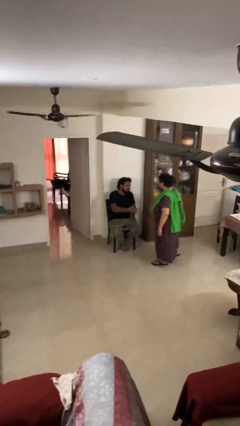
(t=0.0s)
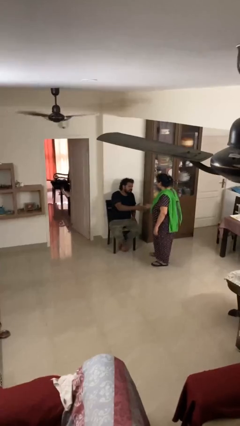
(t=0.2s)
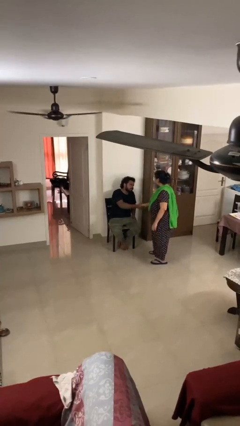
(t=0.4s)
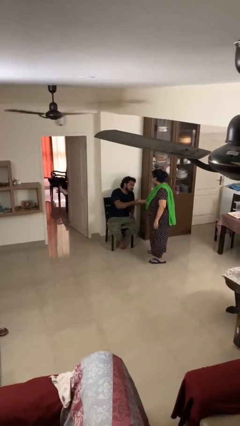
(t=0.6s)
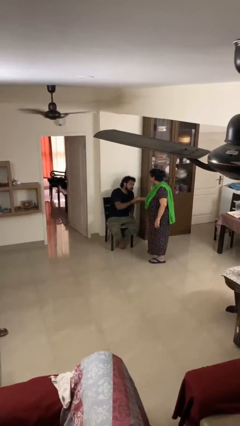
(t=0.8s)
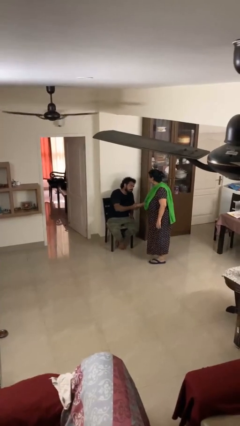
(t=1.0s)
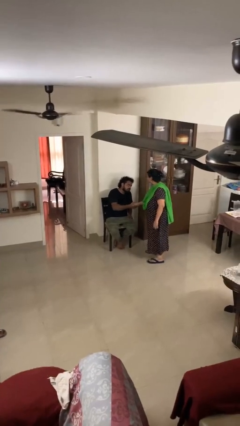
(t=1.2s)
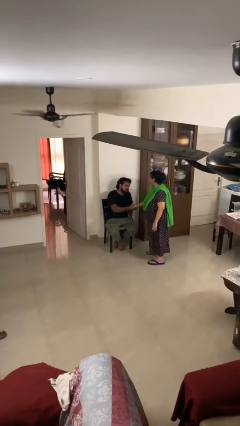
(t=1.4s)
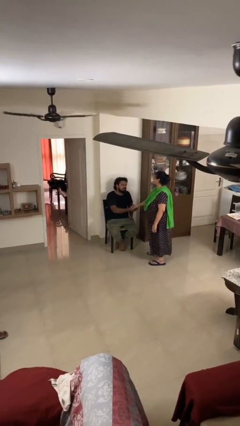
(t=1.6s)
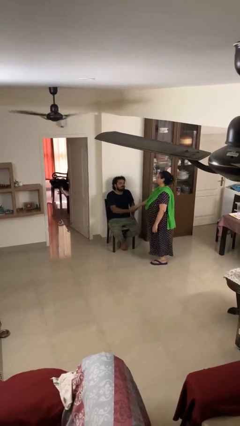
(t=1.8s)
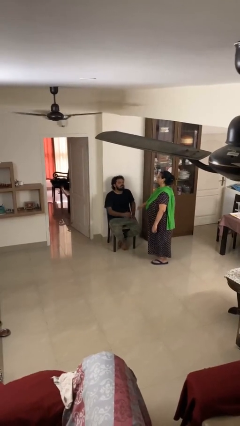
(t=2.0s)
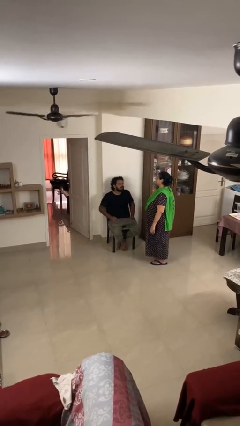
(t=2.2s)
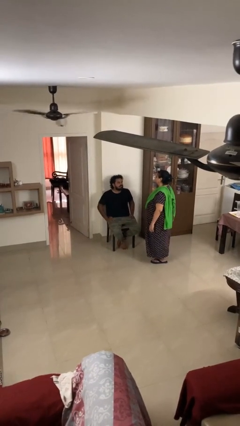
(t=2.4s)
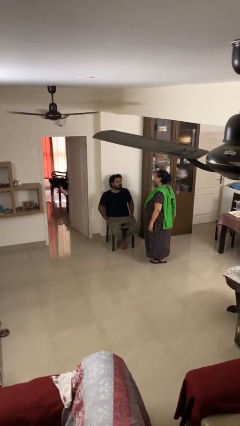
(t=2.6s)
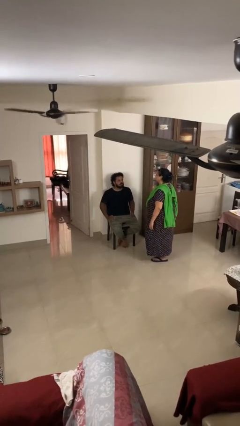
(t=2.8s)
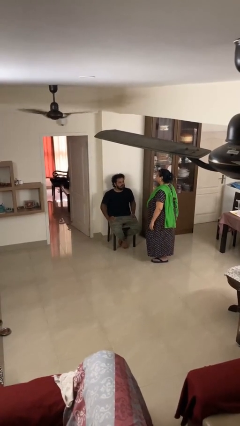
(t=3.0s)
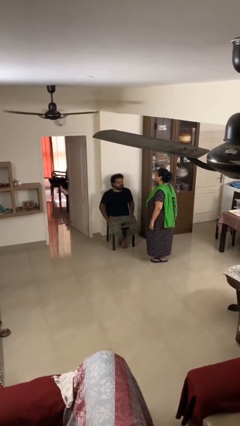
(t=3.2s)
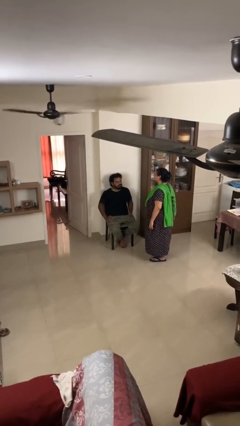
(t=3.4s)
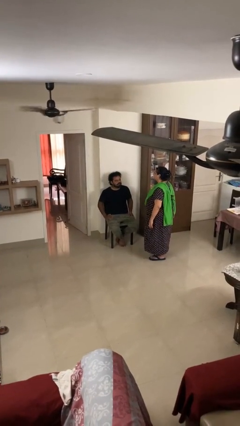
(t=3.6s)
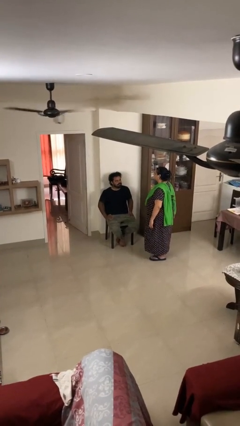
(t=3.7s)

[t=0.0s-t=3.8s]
person shakes hand

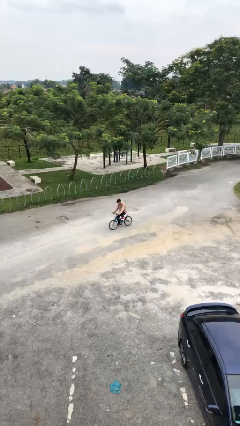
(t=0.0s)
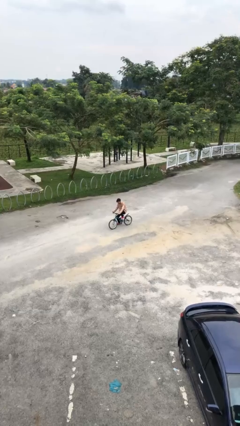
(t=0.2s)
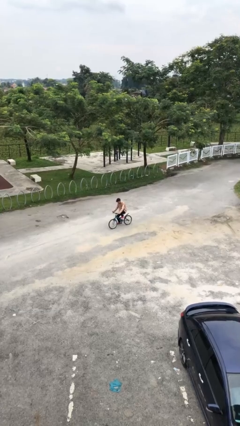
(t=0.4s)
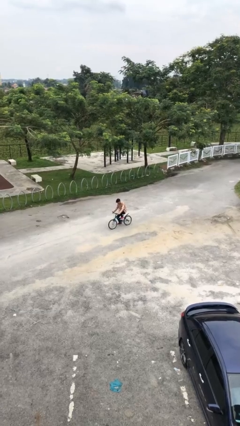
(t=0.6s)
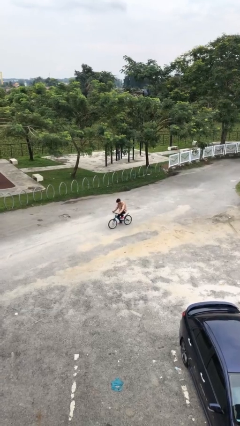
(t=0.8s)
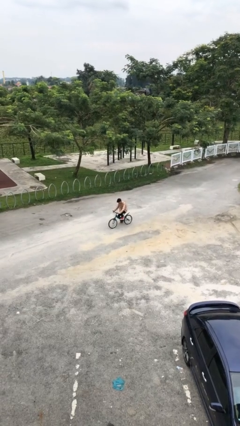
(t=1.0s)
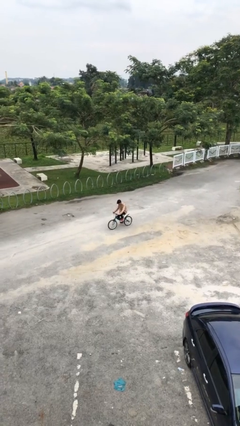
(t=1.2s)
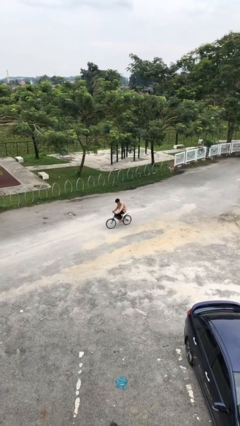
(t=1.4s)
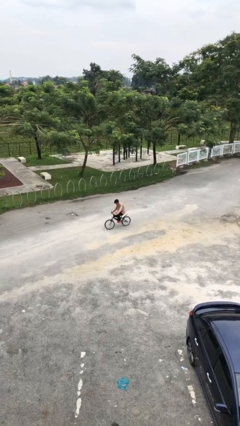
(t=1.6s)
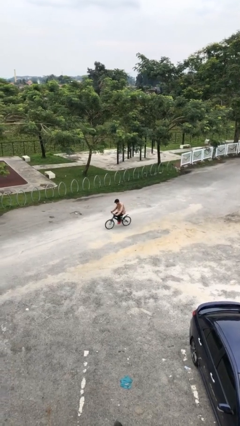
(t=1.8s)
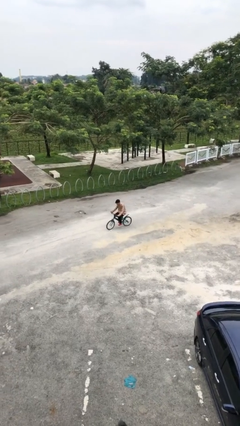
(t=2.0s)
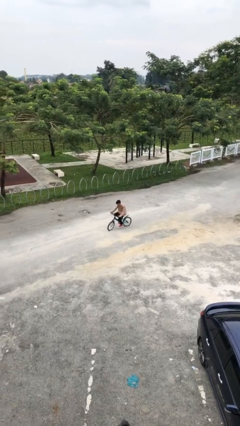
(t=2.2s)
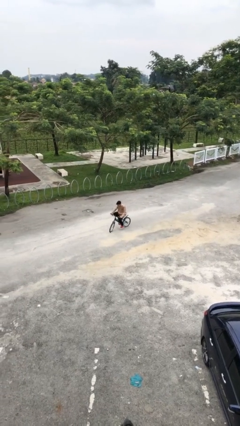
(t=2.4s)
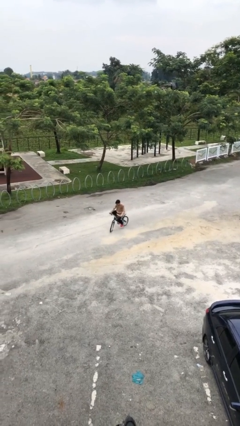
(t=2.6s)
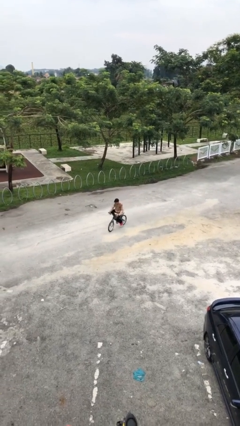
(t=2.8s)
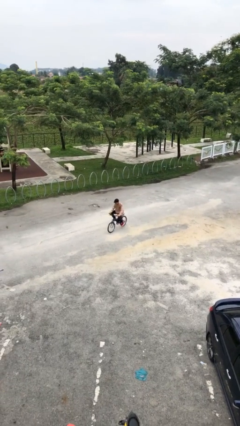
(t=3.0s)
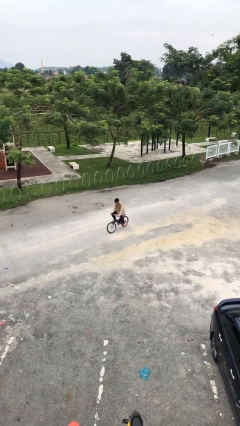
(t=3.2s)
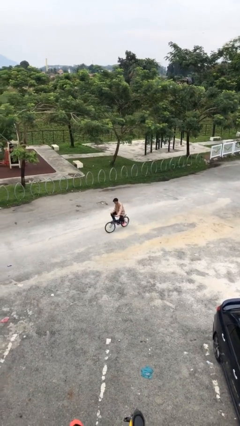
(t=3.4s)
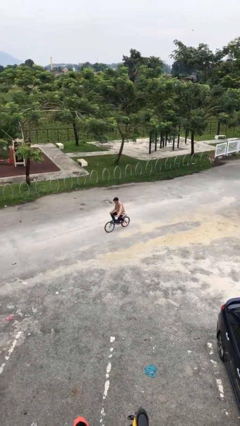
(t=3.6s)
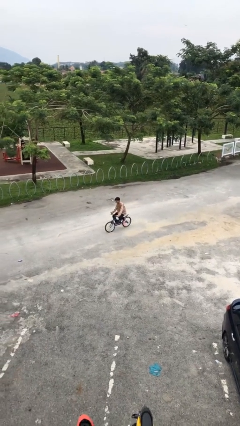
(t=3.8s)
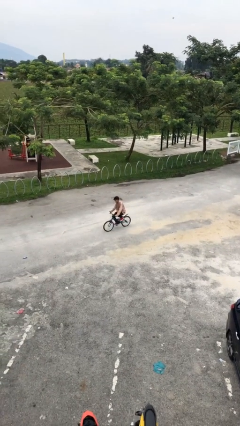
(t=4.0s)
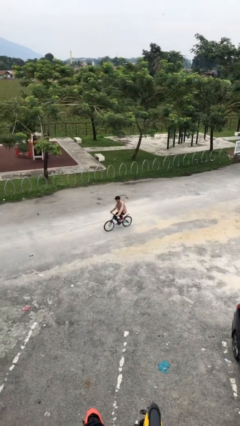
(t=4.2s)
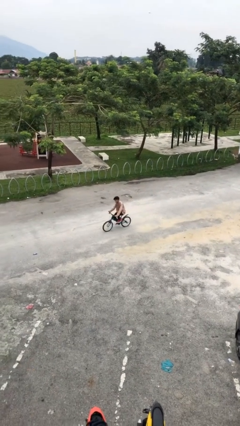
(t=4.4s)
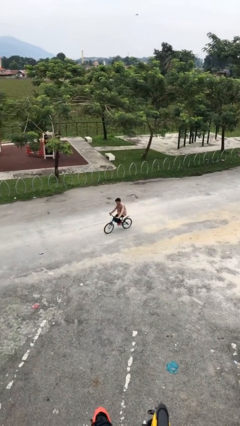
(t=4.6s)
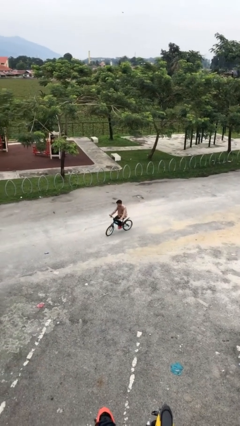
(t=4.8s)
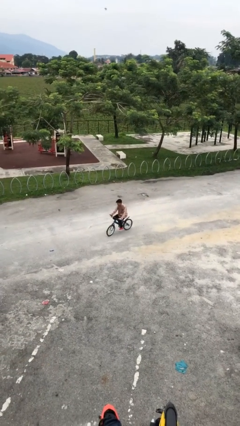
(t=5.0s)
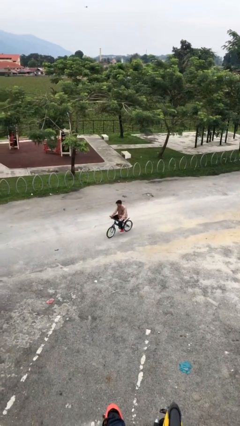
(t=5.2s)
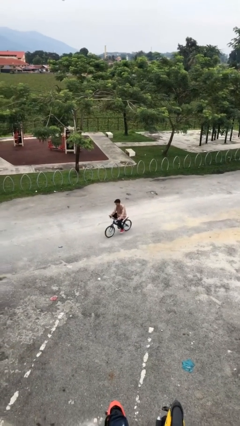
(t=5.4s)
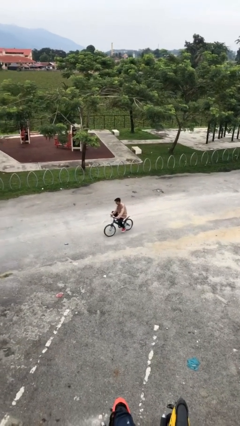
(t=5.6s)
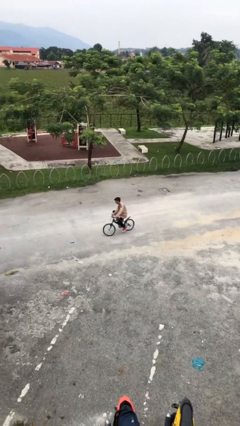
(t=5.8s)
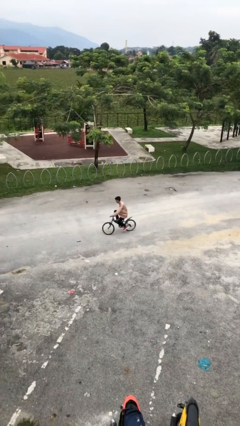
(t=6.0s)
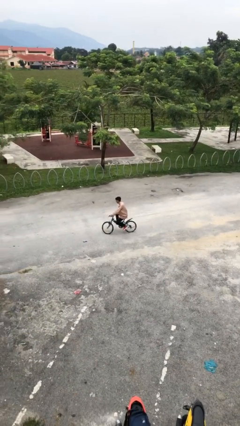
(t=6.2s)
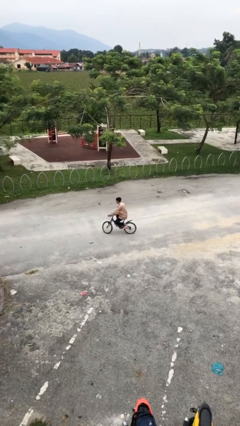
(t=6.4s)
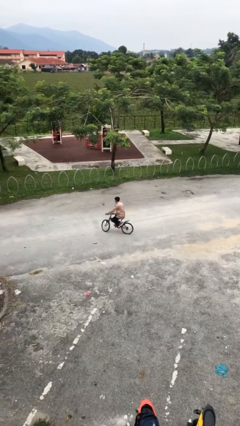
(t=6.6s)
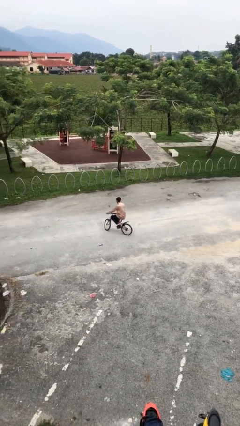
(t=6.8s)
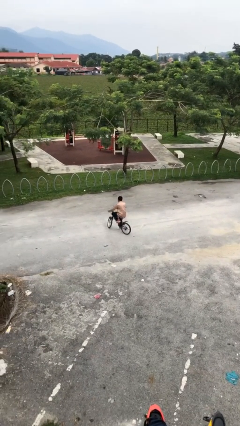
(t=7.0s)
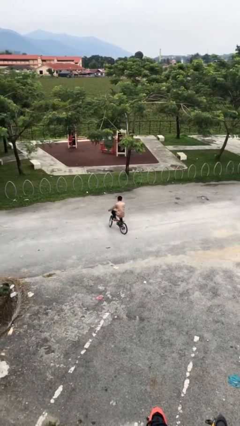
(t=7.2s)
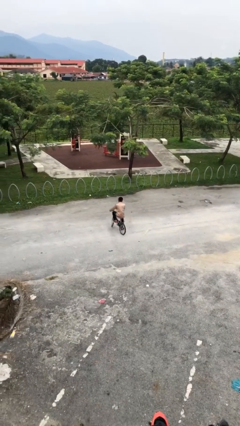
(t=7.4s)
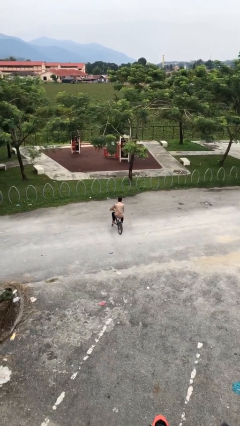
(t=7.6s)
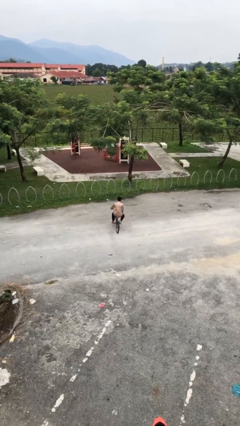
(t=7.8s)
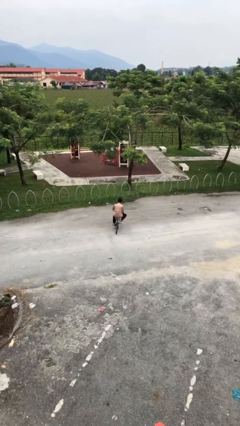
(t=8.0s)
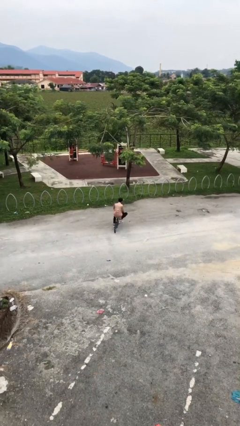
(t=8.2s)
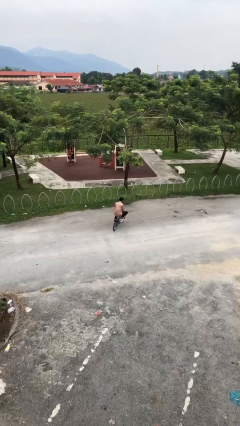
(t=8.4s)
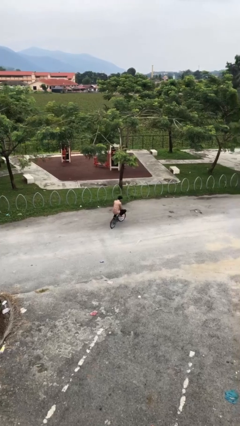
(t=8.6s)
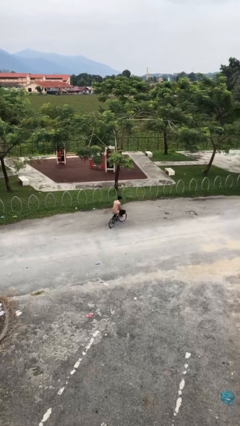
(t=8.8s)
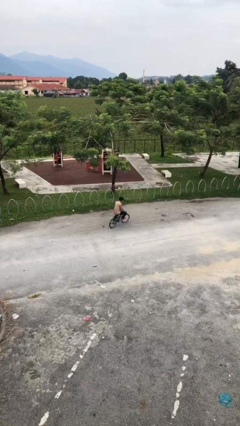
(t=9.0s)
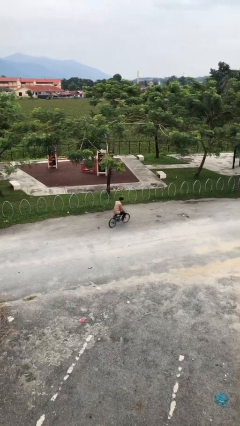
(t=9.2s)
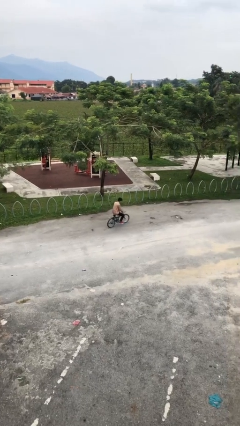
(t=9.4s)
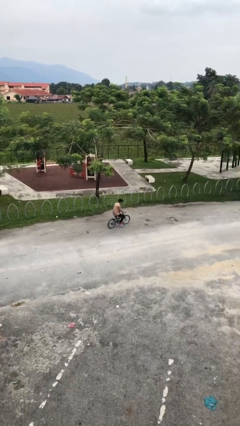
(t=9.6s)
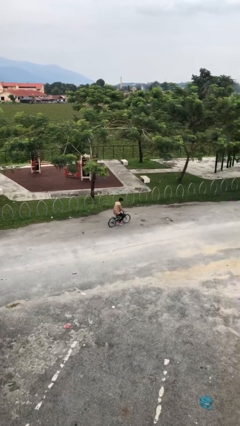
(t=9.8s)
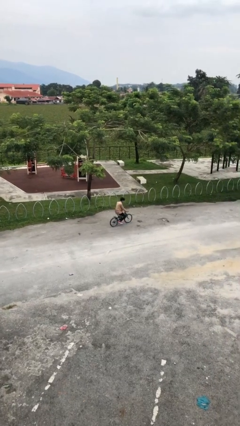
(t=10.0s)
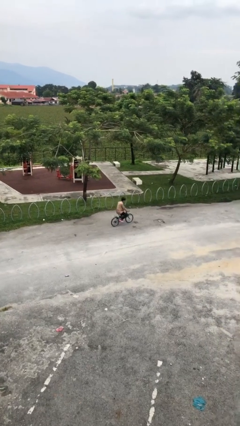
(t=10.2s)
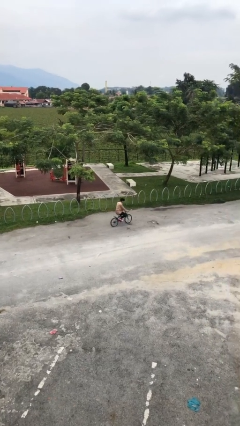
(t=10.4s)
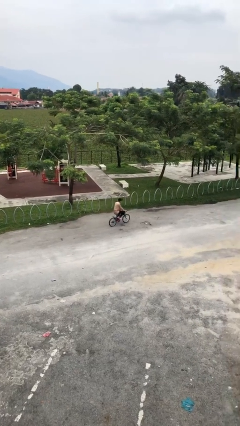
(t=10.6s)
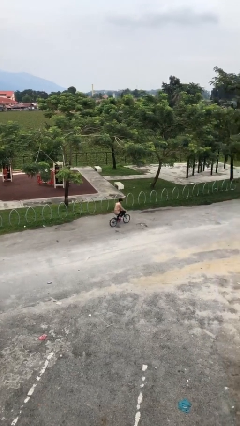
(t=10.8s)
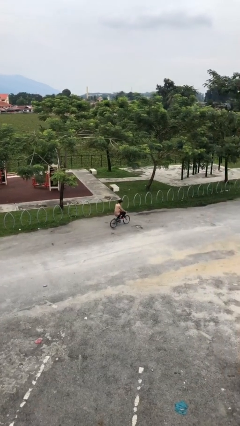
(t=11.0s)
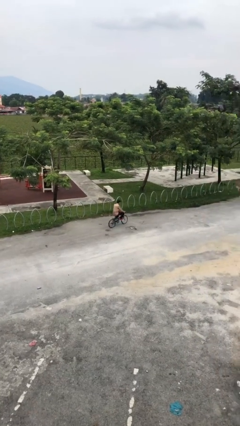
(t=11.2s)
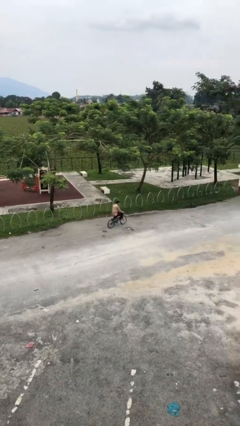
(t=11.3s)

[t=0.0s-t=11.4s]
person rides bicycle

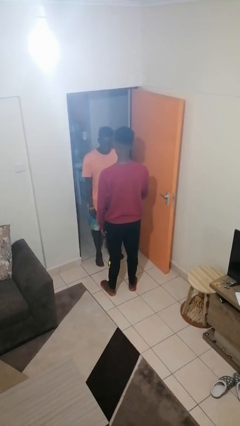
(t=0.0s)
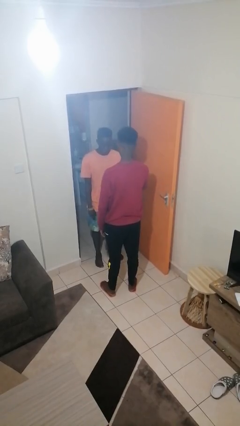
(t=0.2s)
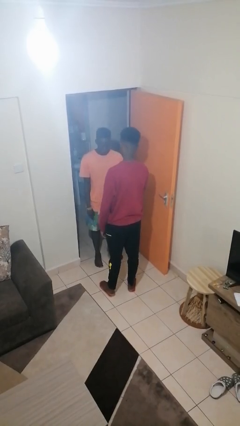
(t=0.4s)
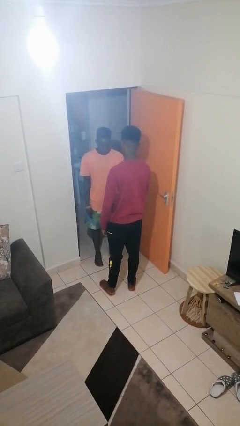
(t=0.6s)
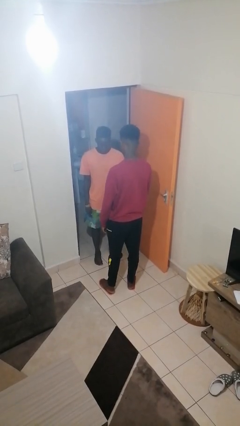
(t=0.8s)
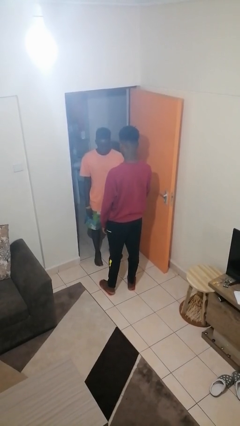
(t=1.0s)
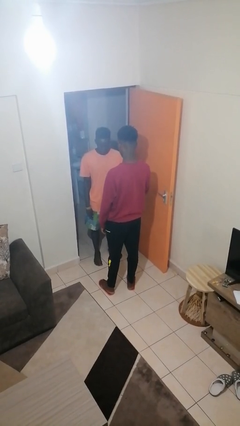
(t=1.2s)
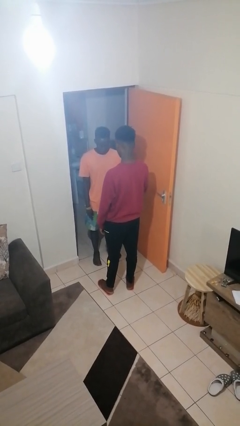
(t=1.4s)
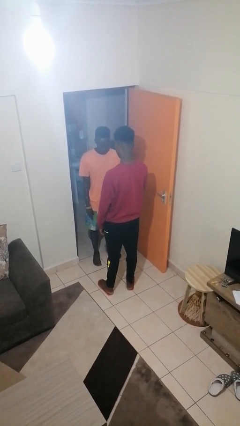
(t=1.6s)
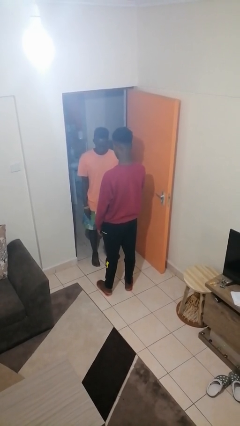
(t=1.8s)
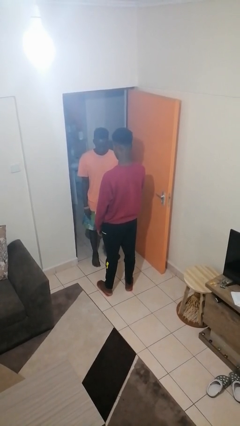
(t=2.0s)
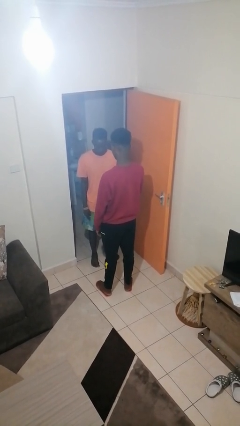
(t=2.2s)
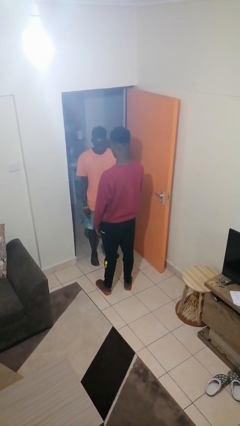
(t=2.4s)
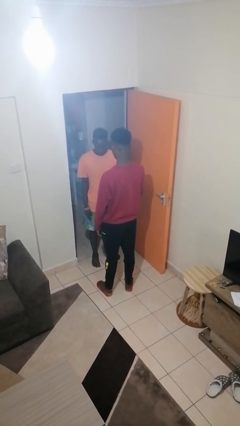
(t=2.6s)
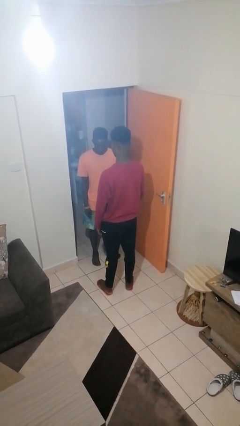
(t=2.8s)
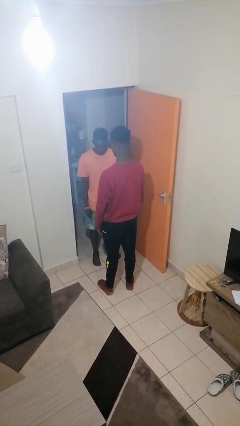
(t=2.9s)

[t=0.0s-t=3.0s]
person grabs person by forearm
